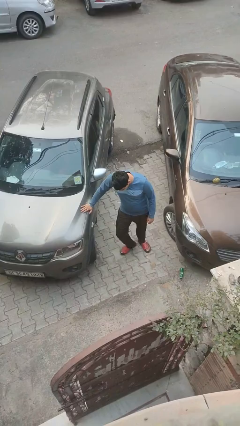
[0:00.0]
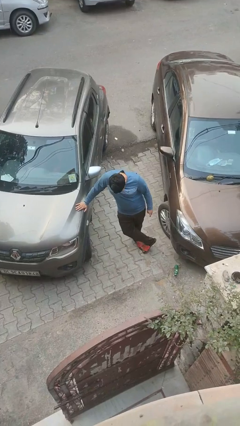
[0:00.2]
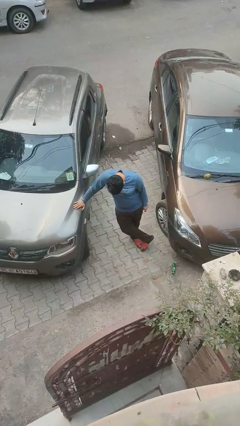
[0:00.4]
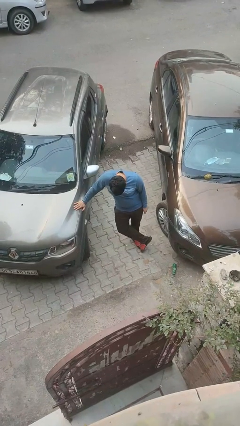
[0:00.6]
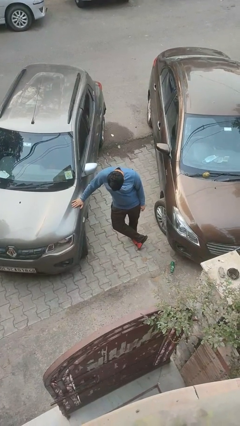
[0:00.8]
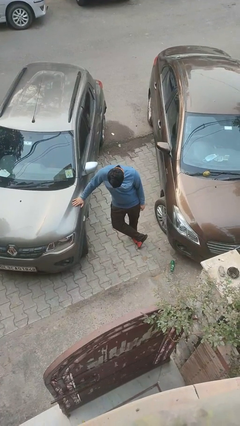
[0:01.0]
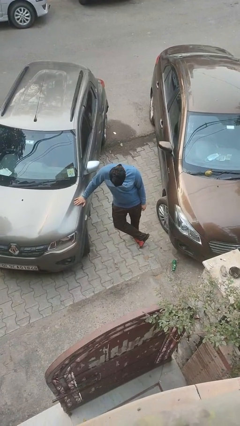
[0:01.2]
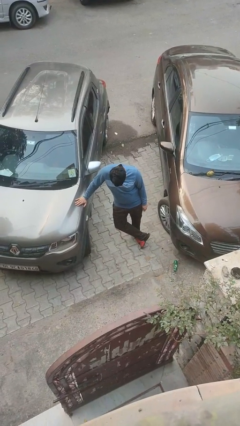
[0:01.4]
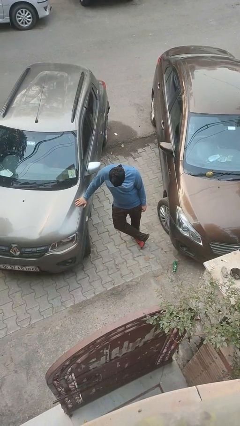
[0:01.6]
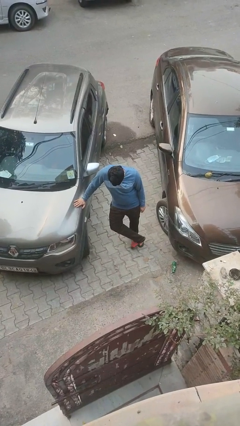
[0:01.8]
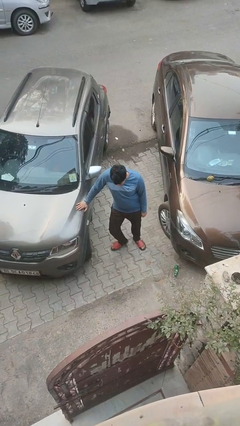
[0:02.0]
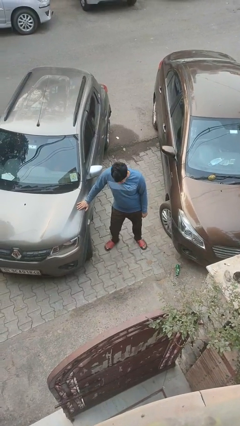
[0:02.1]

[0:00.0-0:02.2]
person leans against car

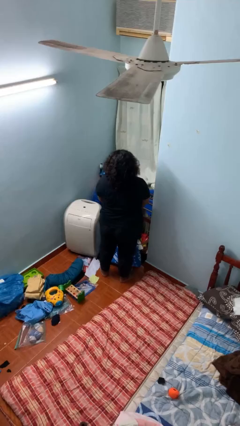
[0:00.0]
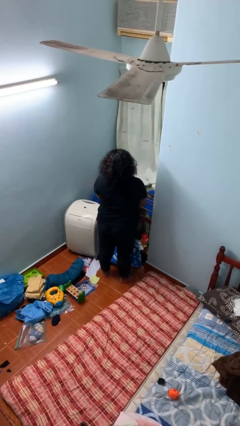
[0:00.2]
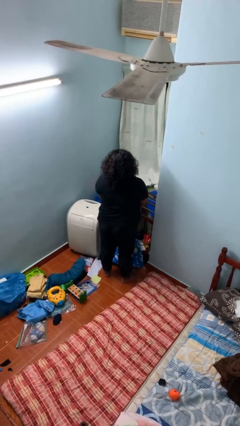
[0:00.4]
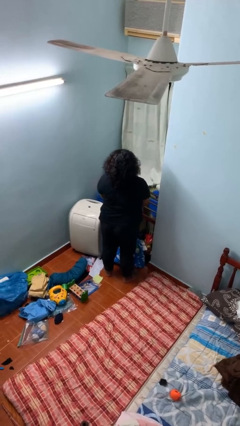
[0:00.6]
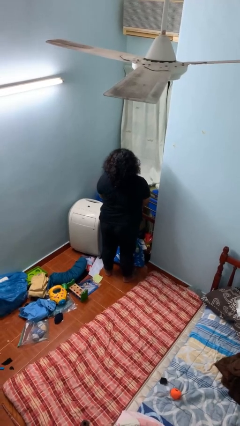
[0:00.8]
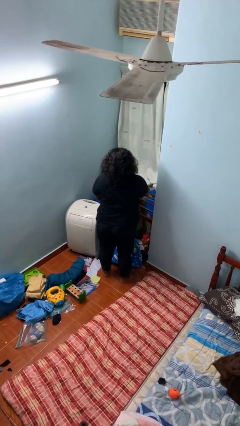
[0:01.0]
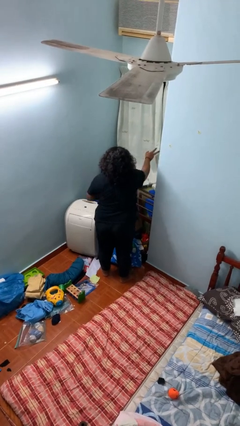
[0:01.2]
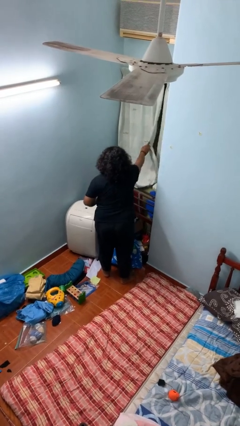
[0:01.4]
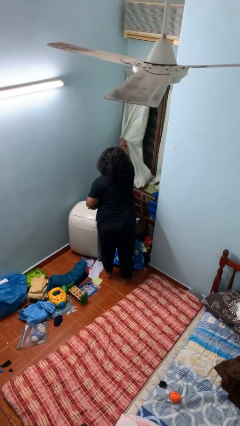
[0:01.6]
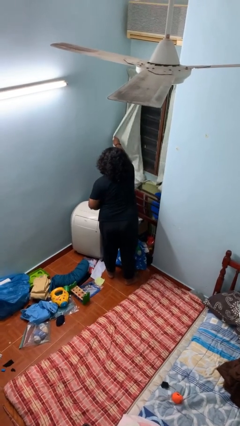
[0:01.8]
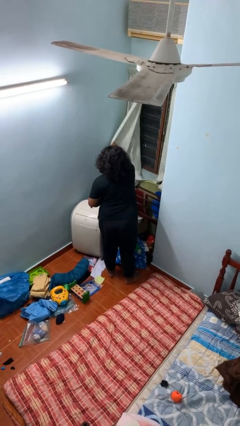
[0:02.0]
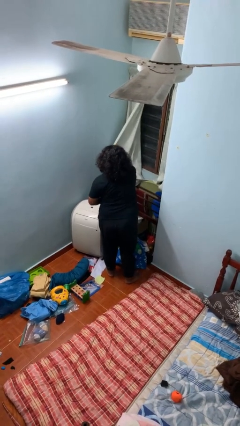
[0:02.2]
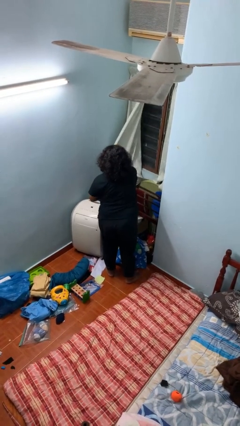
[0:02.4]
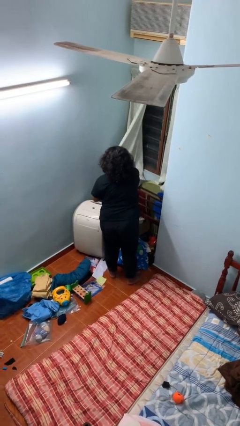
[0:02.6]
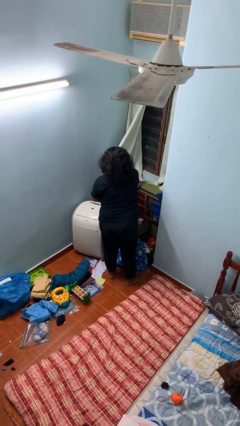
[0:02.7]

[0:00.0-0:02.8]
person opens curtains

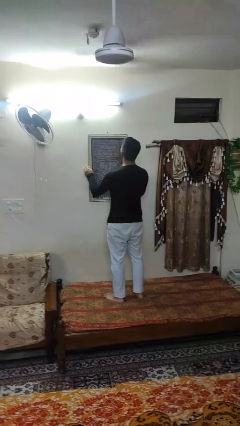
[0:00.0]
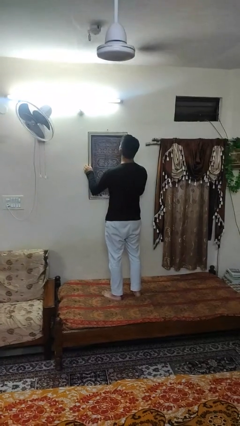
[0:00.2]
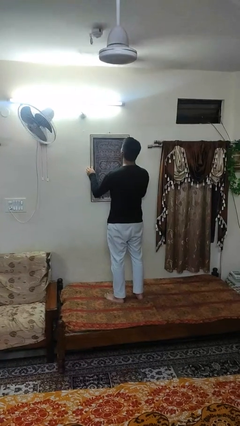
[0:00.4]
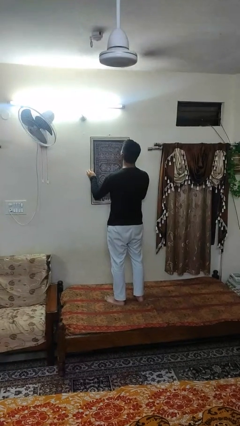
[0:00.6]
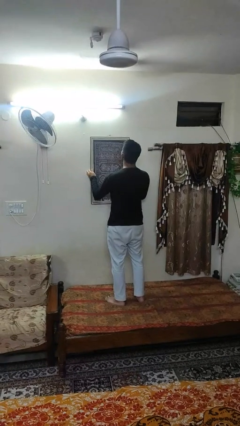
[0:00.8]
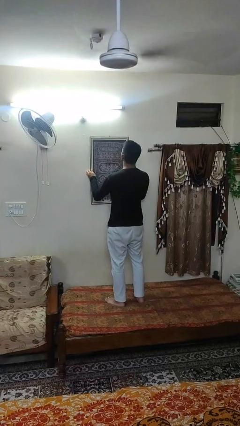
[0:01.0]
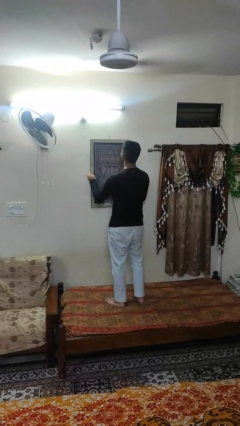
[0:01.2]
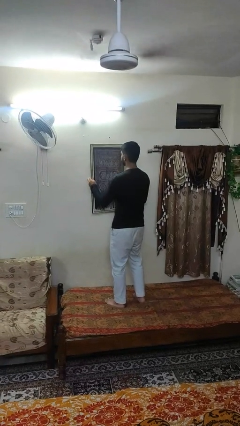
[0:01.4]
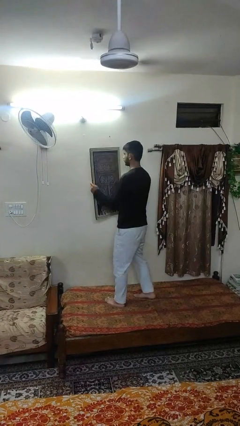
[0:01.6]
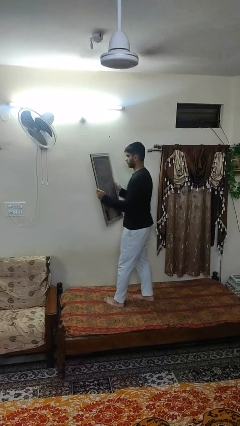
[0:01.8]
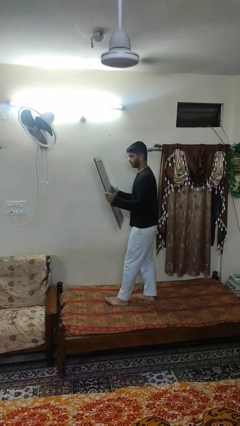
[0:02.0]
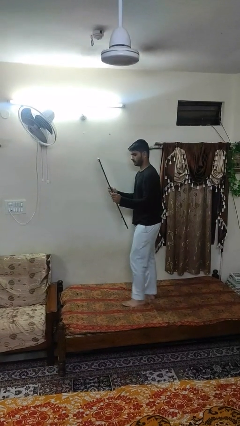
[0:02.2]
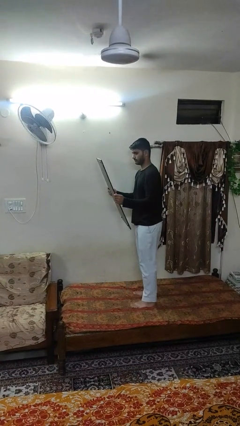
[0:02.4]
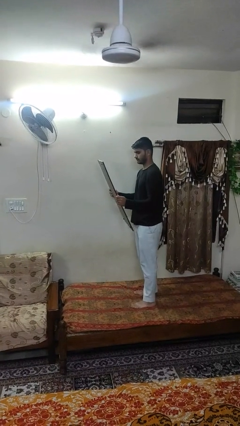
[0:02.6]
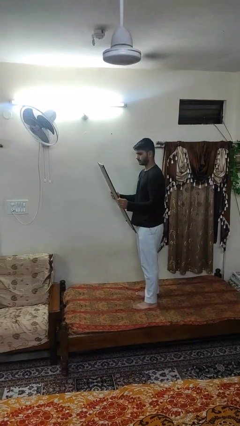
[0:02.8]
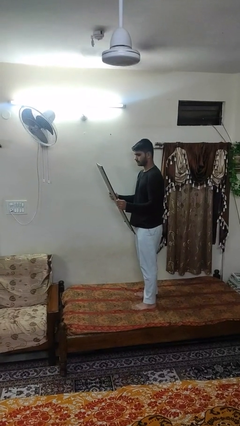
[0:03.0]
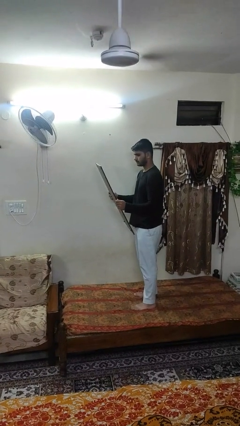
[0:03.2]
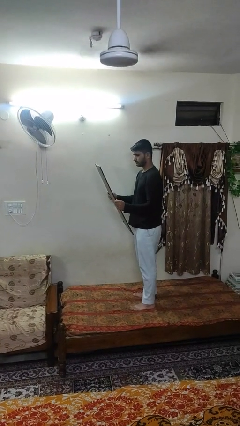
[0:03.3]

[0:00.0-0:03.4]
person takes down picture frame

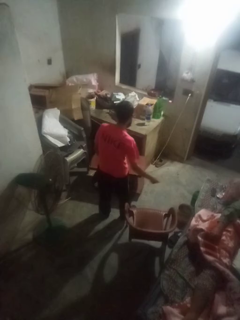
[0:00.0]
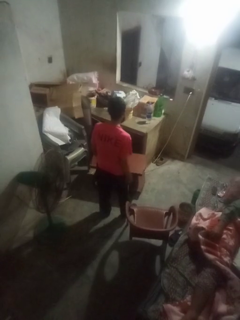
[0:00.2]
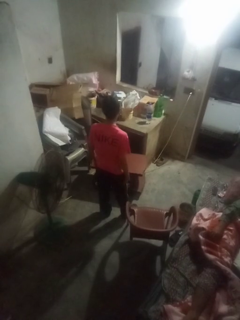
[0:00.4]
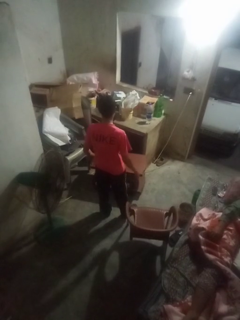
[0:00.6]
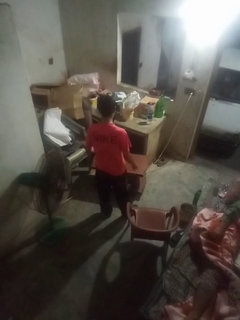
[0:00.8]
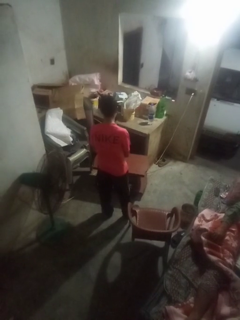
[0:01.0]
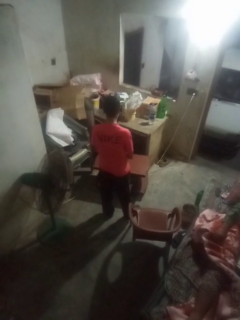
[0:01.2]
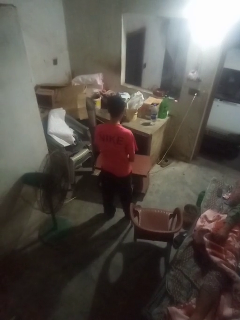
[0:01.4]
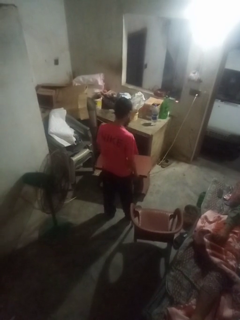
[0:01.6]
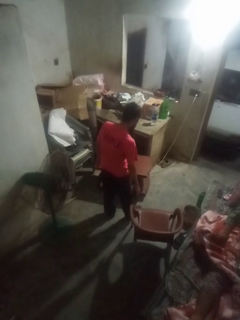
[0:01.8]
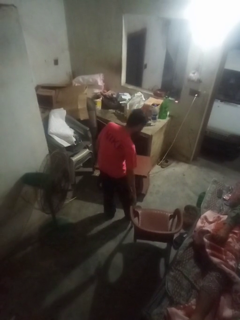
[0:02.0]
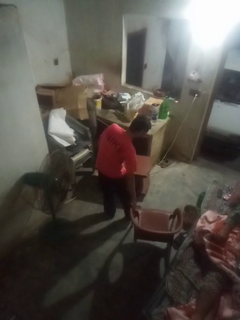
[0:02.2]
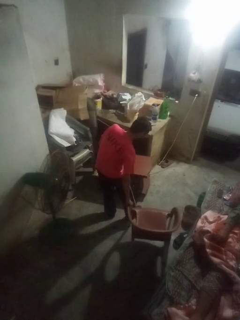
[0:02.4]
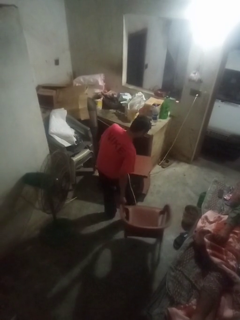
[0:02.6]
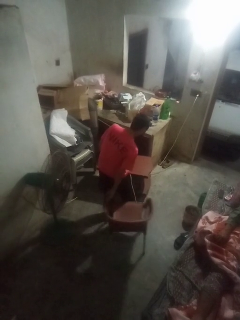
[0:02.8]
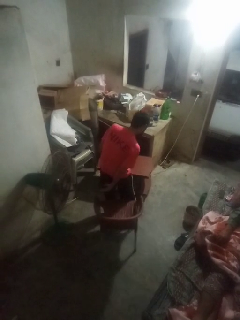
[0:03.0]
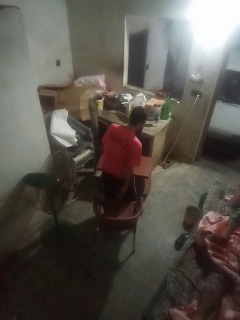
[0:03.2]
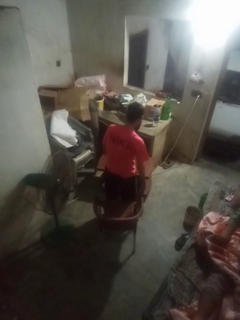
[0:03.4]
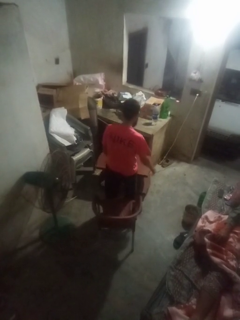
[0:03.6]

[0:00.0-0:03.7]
person pulls out chair

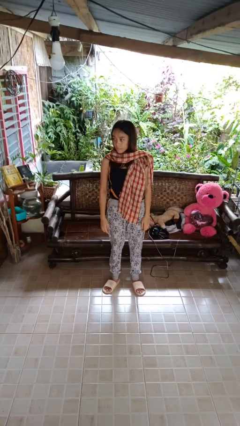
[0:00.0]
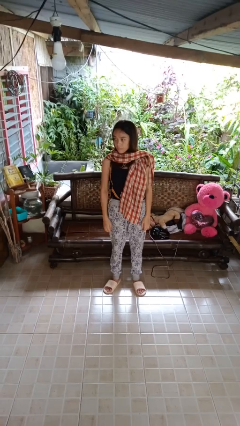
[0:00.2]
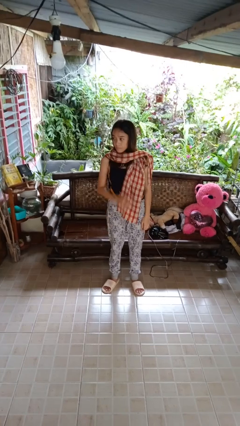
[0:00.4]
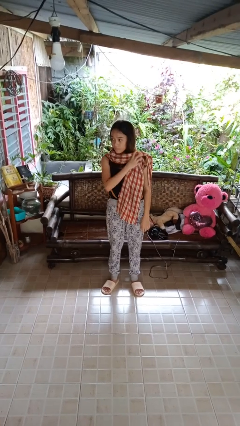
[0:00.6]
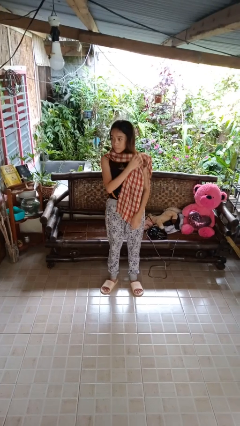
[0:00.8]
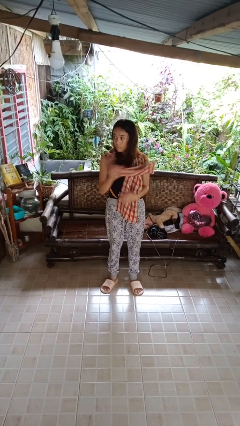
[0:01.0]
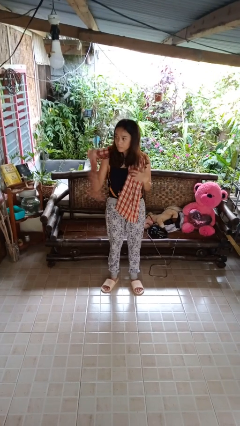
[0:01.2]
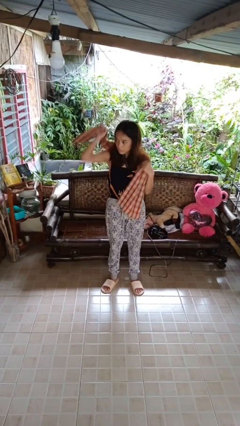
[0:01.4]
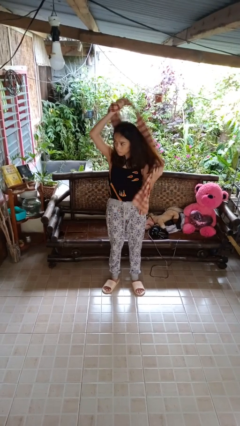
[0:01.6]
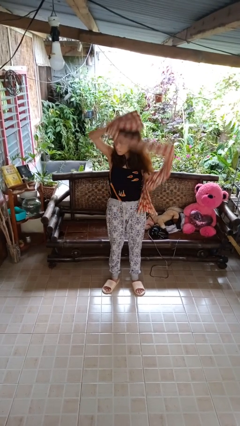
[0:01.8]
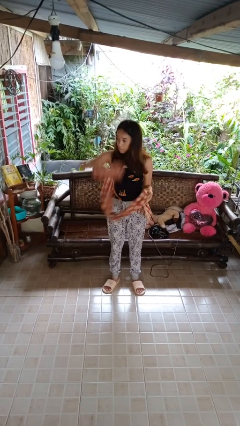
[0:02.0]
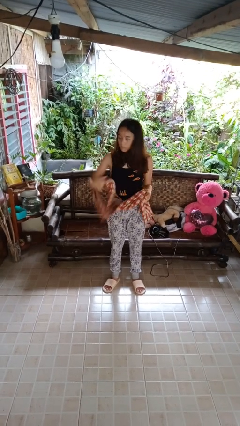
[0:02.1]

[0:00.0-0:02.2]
person takes off scarf

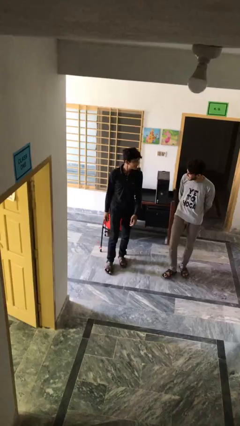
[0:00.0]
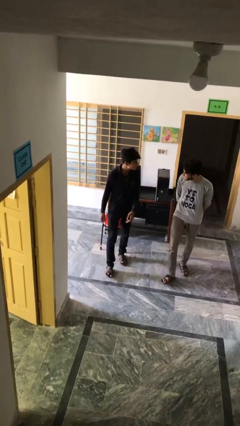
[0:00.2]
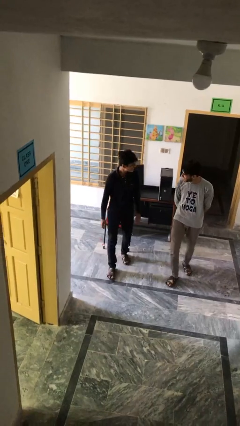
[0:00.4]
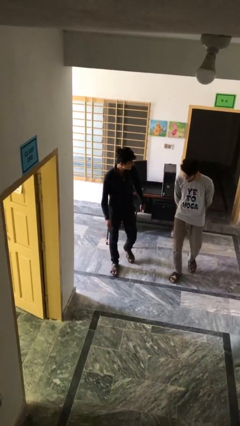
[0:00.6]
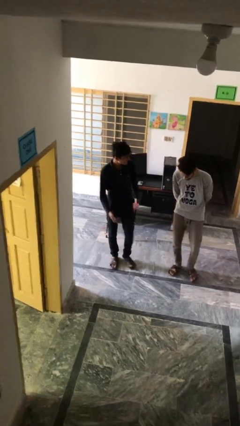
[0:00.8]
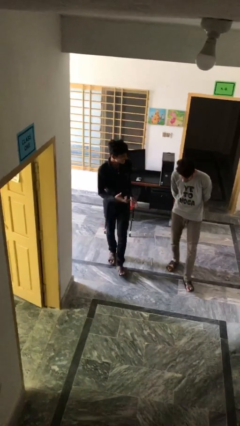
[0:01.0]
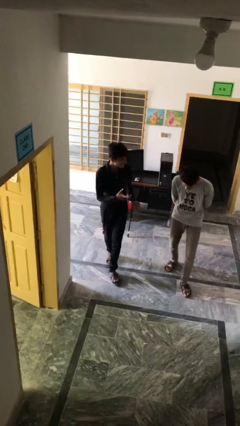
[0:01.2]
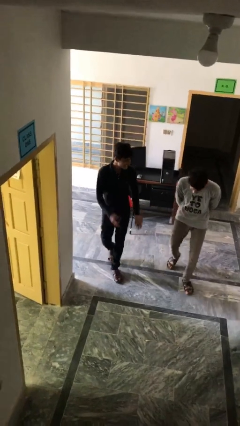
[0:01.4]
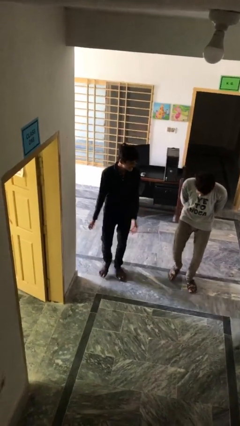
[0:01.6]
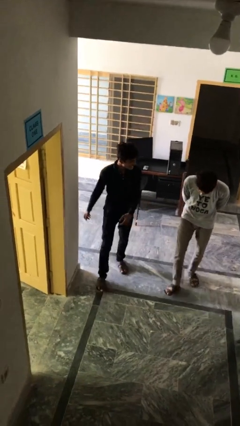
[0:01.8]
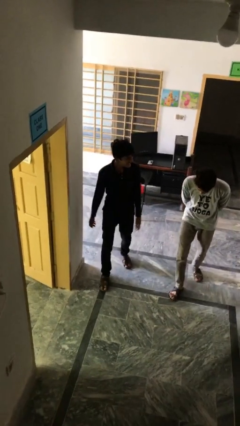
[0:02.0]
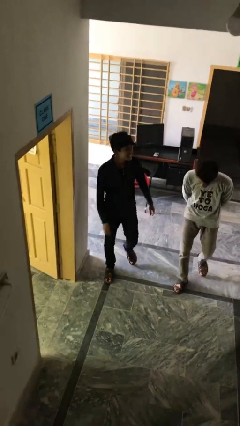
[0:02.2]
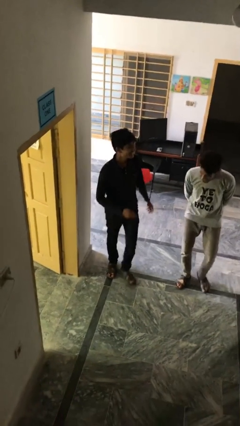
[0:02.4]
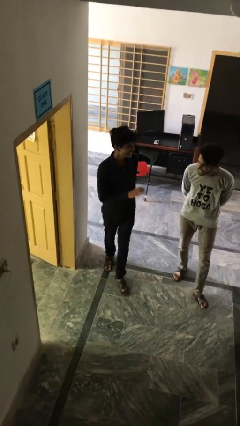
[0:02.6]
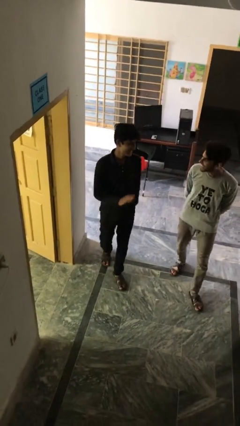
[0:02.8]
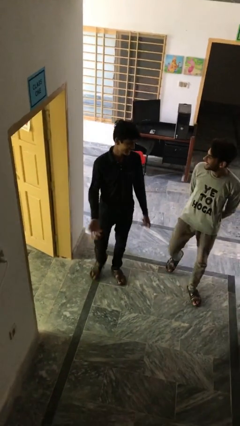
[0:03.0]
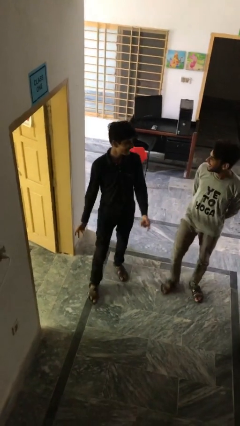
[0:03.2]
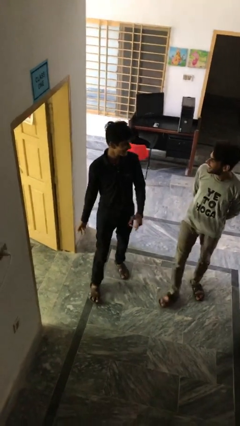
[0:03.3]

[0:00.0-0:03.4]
person talks to person

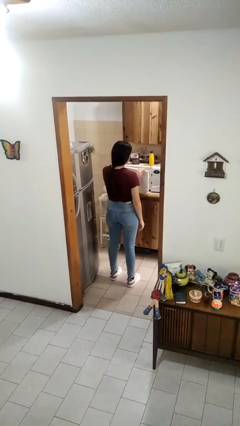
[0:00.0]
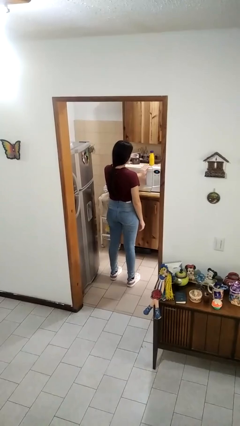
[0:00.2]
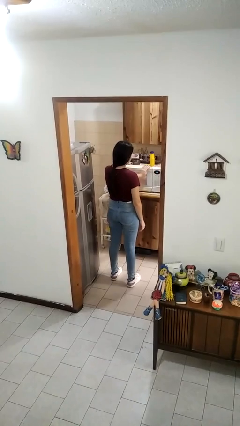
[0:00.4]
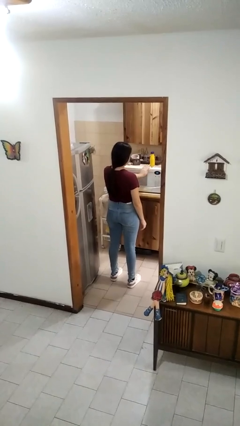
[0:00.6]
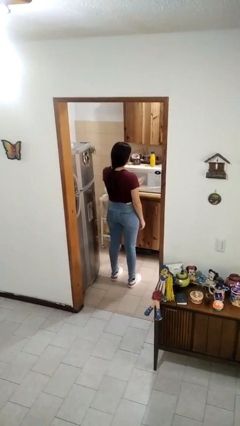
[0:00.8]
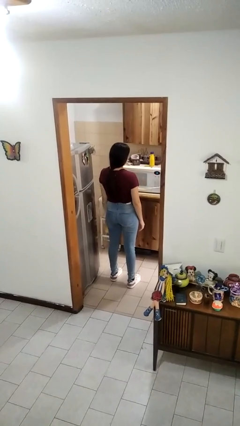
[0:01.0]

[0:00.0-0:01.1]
person closes microwave
